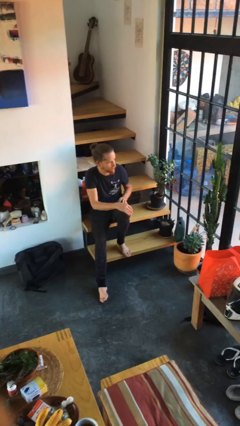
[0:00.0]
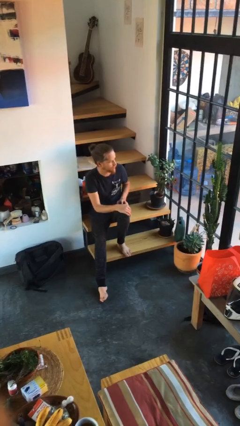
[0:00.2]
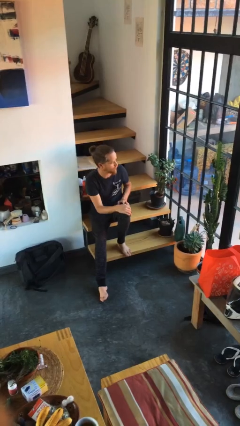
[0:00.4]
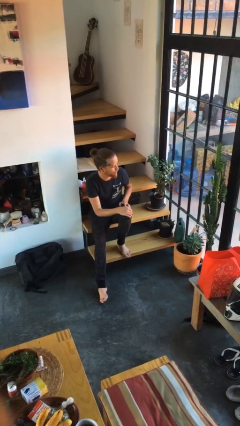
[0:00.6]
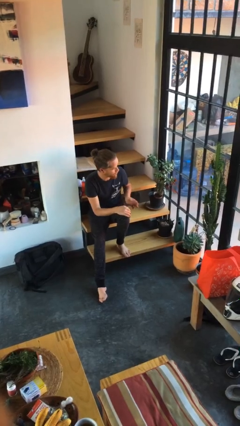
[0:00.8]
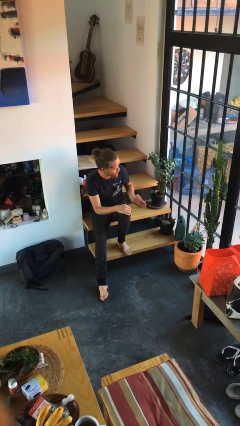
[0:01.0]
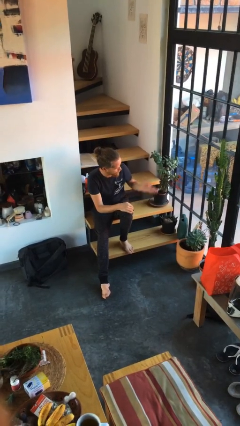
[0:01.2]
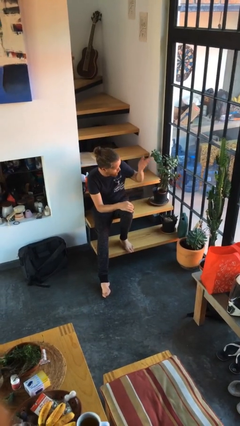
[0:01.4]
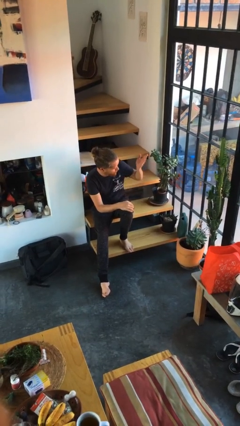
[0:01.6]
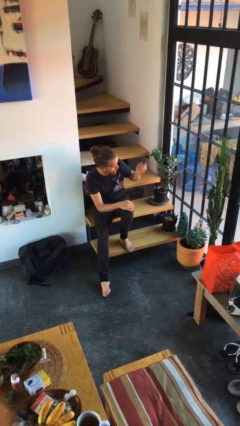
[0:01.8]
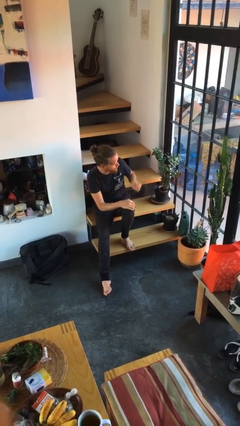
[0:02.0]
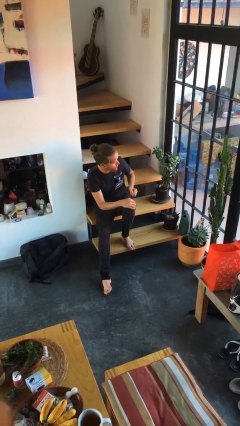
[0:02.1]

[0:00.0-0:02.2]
person gestures swipe up

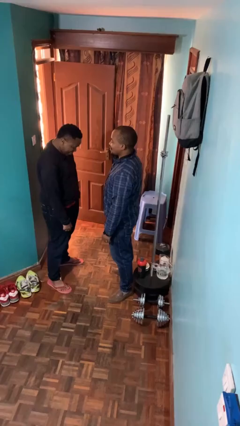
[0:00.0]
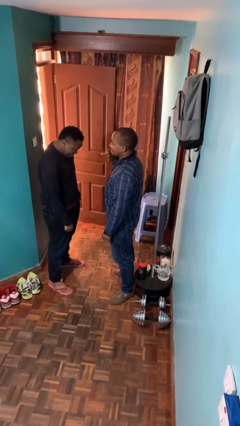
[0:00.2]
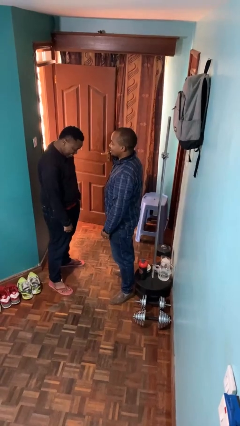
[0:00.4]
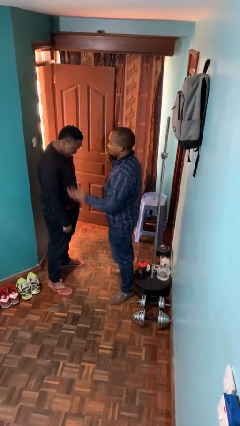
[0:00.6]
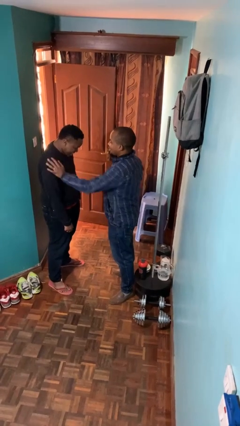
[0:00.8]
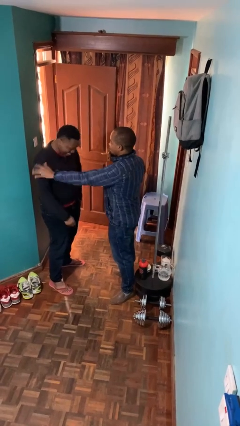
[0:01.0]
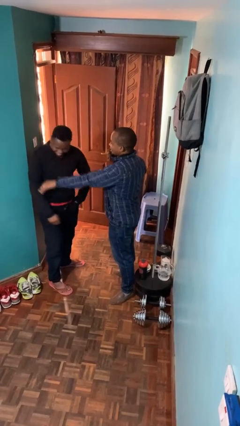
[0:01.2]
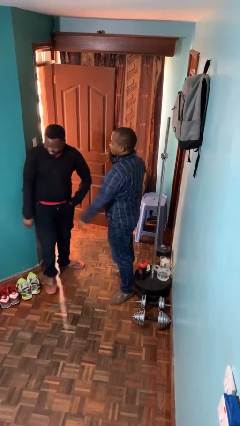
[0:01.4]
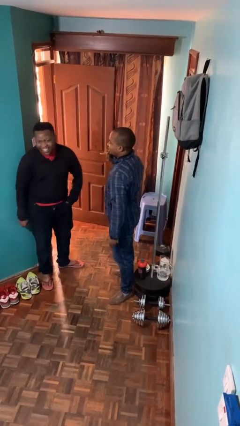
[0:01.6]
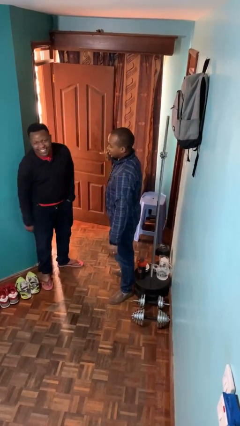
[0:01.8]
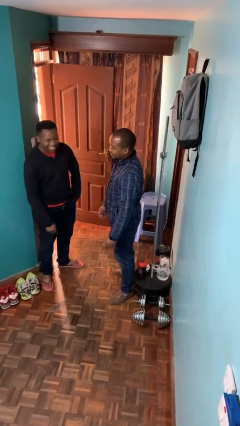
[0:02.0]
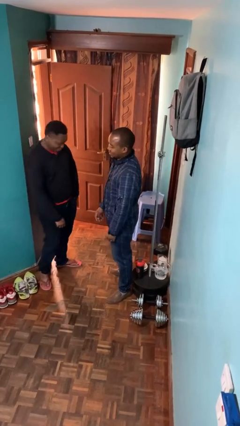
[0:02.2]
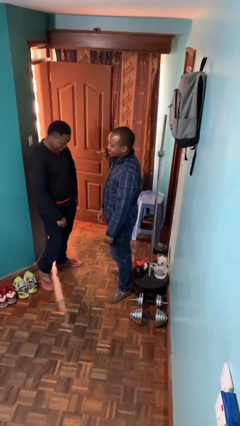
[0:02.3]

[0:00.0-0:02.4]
person shoves person

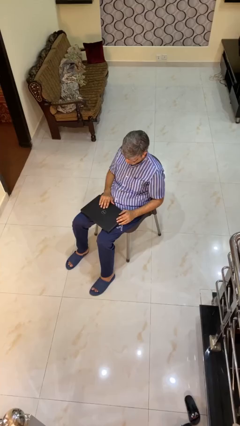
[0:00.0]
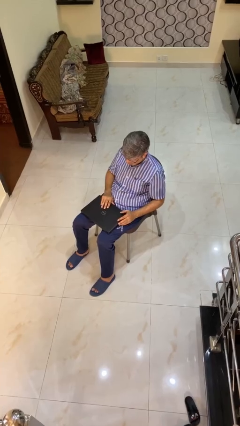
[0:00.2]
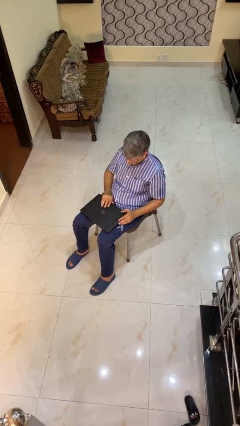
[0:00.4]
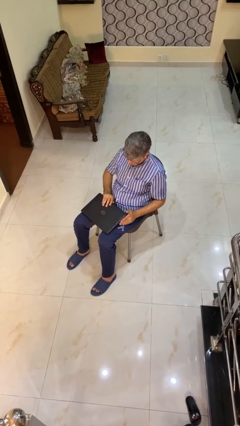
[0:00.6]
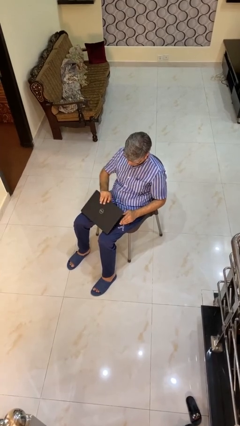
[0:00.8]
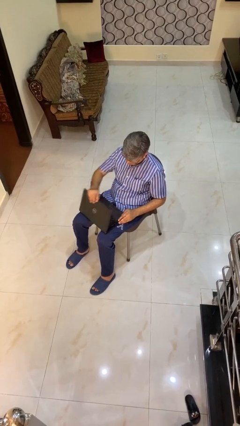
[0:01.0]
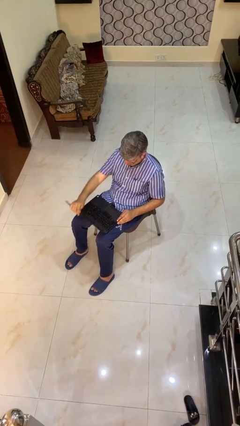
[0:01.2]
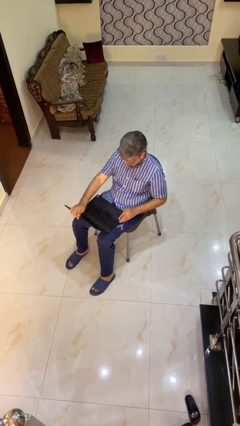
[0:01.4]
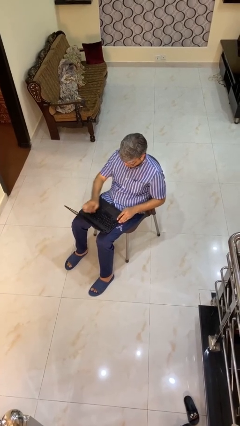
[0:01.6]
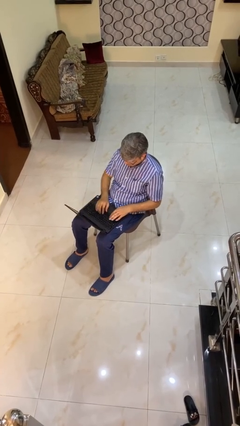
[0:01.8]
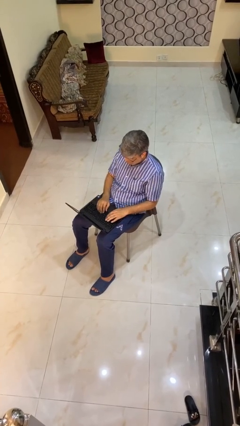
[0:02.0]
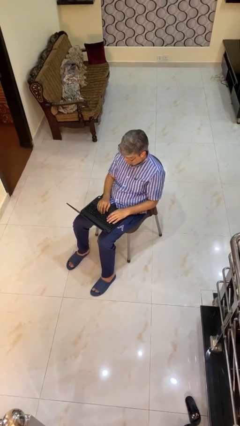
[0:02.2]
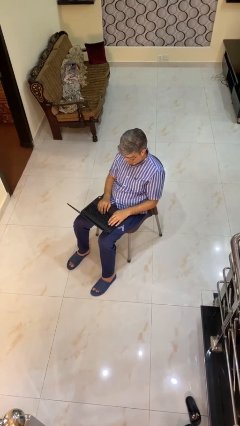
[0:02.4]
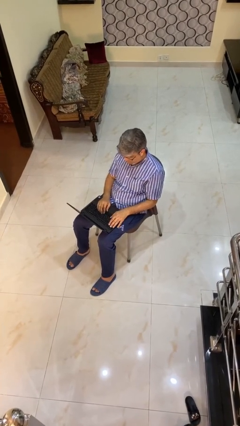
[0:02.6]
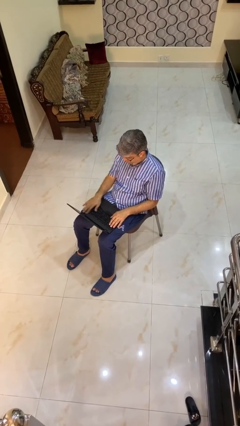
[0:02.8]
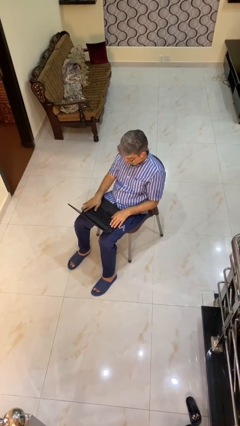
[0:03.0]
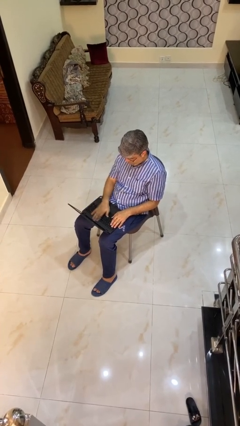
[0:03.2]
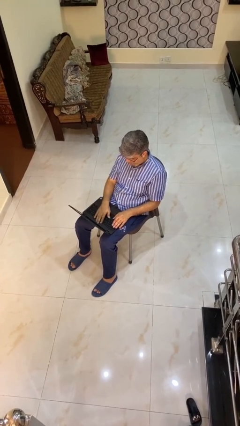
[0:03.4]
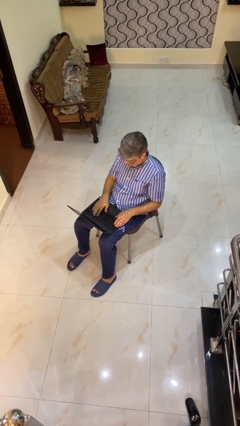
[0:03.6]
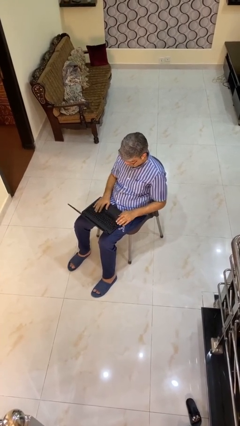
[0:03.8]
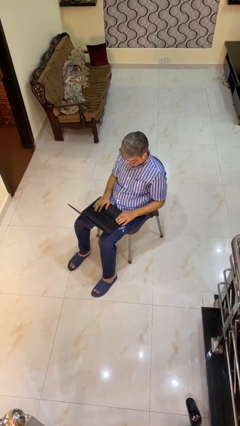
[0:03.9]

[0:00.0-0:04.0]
person opens laptop

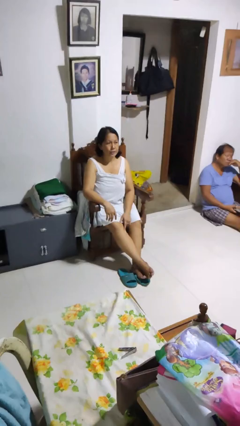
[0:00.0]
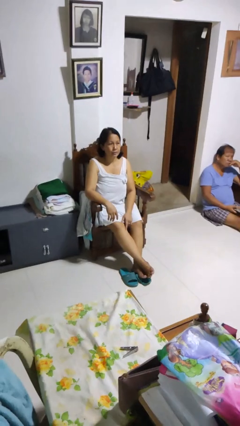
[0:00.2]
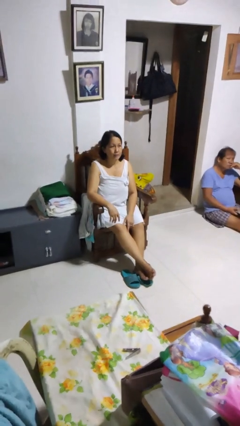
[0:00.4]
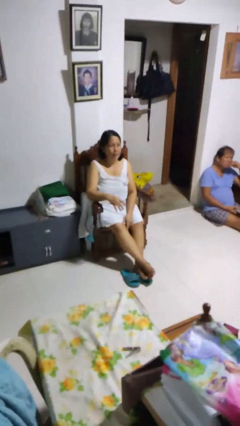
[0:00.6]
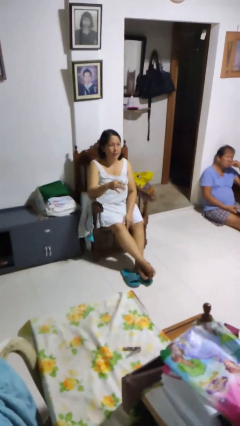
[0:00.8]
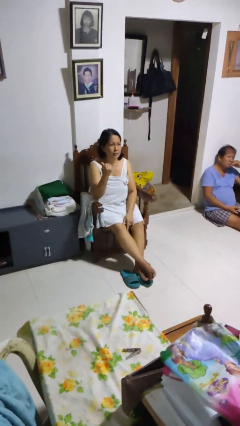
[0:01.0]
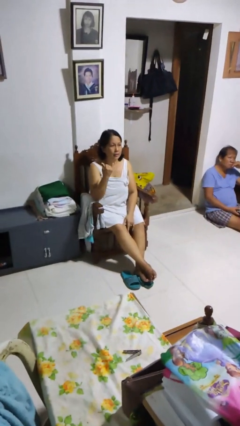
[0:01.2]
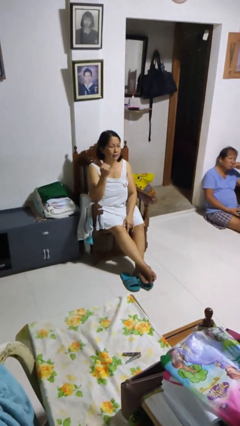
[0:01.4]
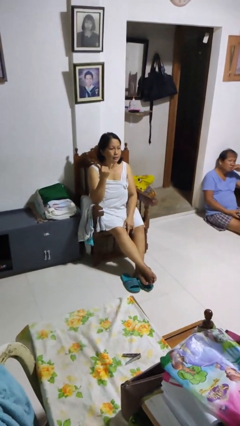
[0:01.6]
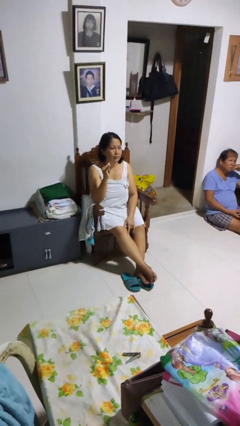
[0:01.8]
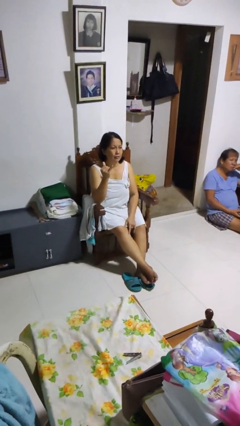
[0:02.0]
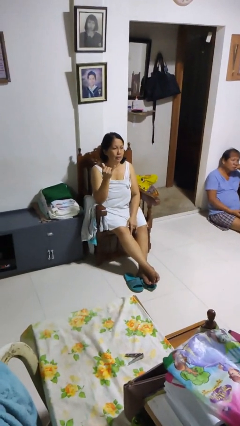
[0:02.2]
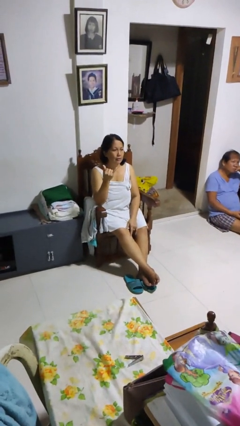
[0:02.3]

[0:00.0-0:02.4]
person gestures hang loose

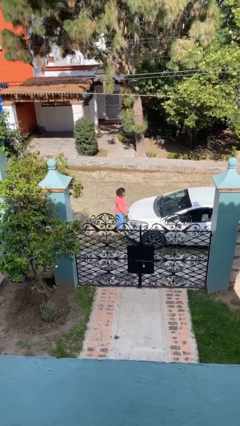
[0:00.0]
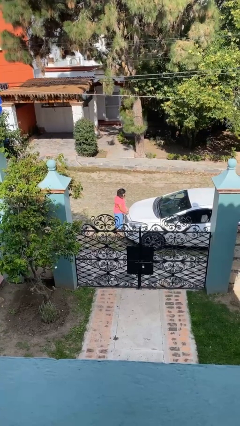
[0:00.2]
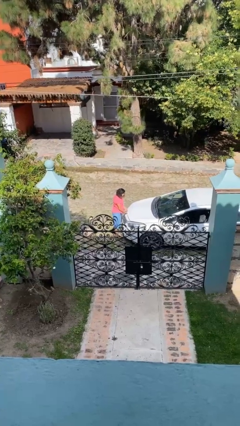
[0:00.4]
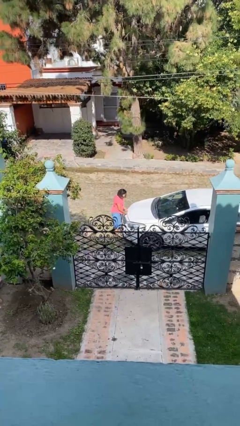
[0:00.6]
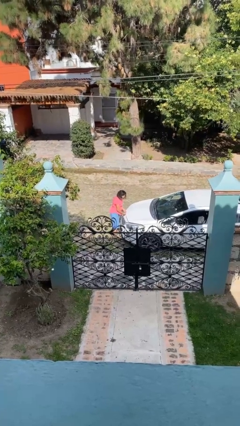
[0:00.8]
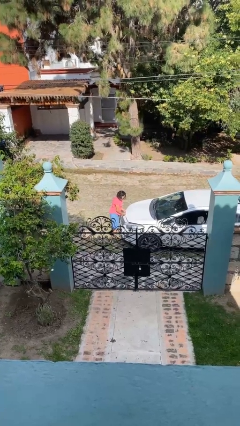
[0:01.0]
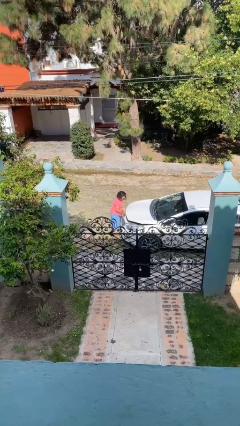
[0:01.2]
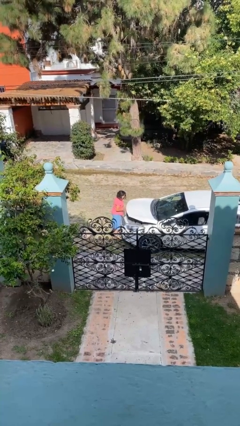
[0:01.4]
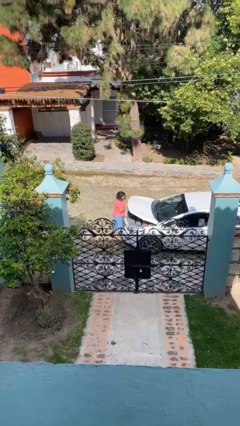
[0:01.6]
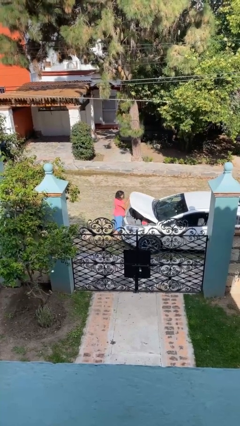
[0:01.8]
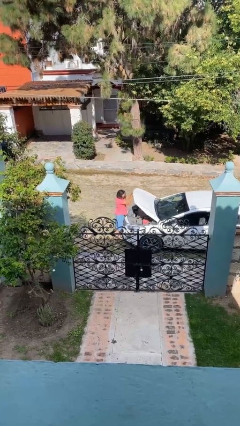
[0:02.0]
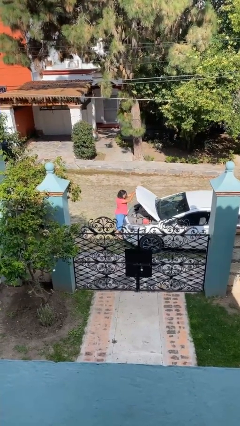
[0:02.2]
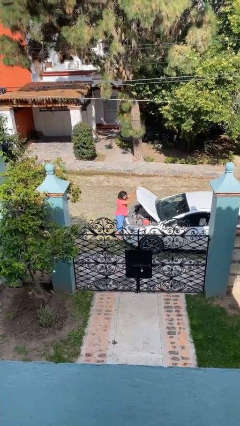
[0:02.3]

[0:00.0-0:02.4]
person opens car hood

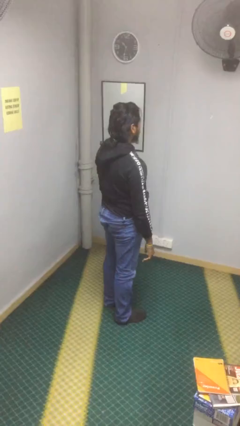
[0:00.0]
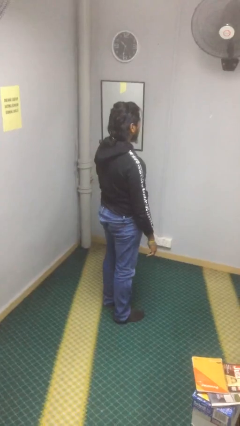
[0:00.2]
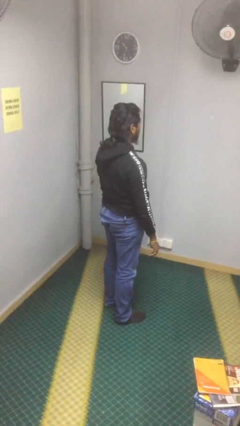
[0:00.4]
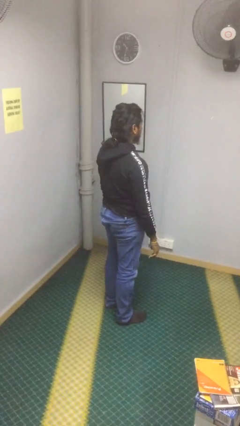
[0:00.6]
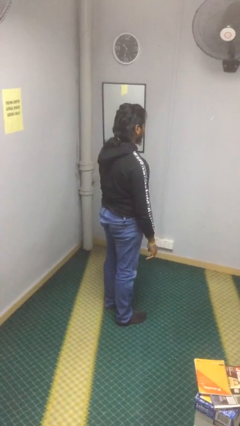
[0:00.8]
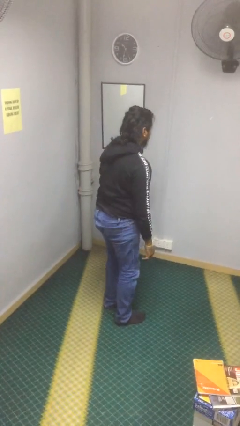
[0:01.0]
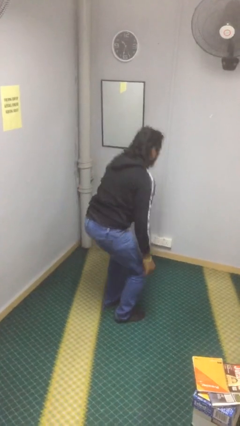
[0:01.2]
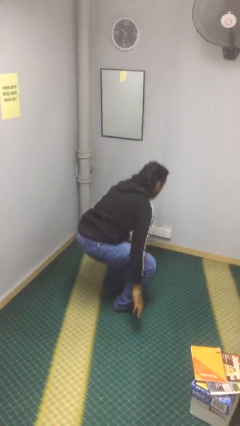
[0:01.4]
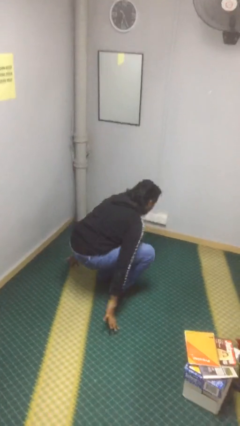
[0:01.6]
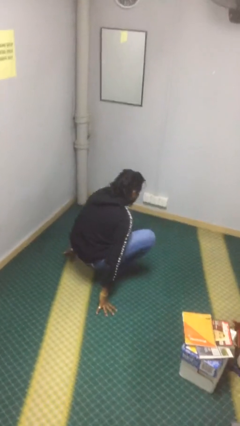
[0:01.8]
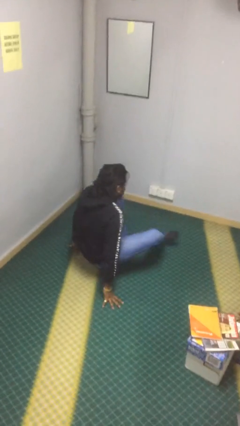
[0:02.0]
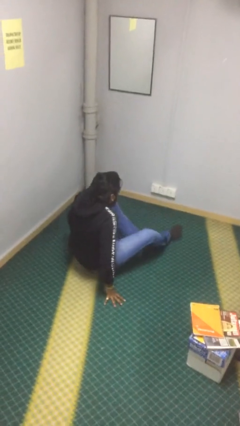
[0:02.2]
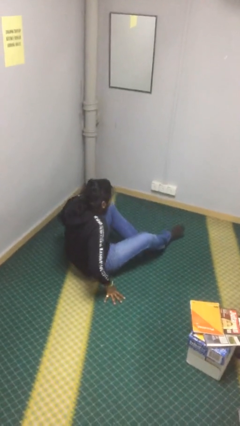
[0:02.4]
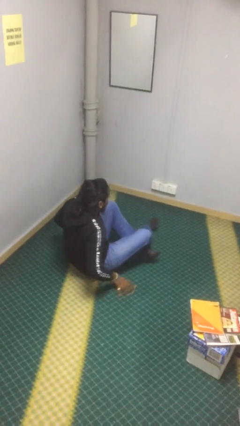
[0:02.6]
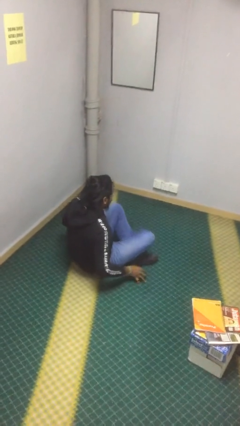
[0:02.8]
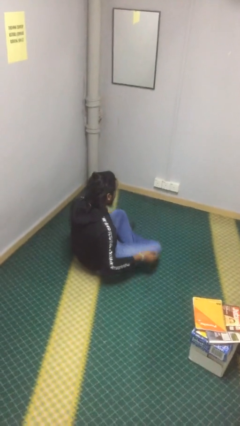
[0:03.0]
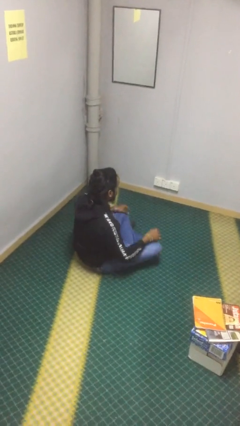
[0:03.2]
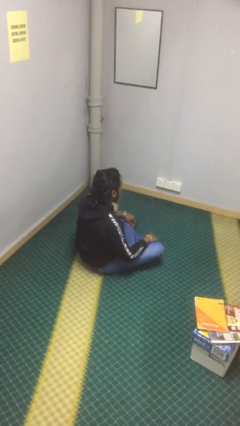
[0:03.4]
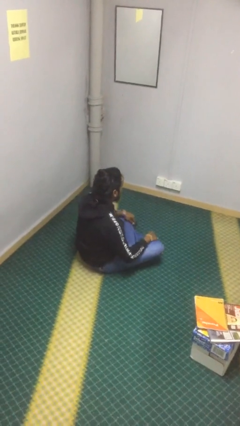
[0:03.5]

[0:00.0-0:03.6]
person sits crisscross
